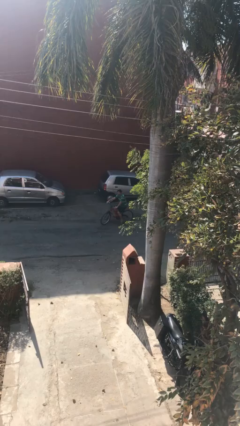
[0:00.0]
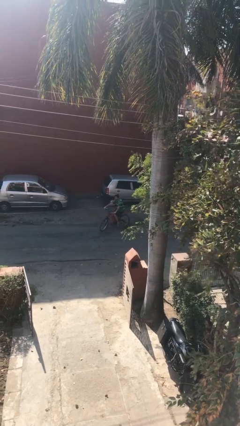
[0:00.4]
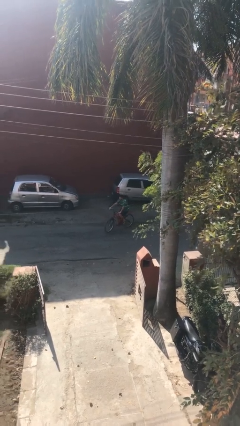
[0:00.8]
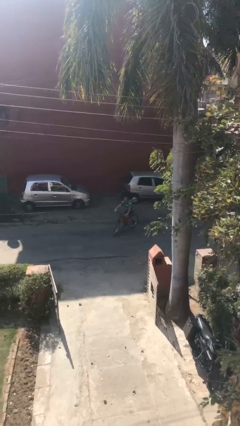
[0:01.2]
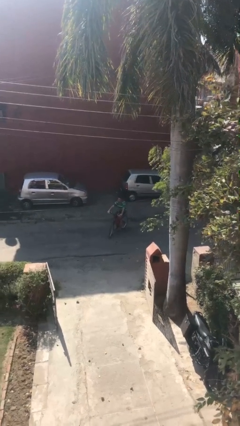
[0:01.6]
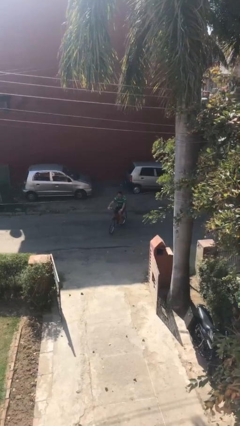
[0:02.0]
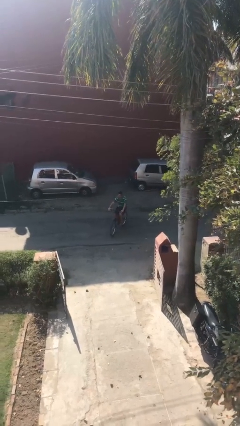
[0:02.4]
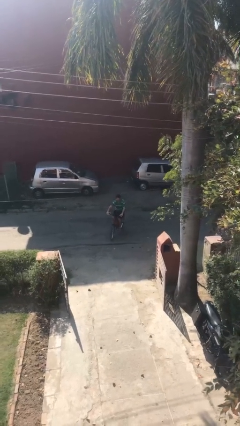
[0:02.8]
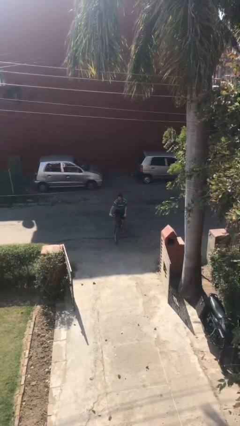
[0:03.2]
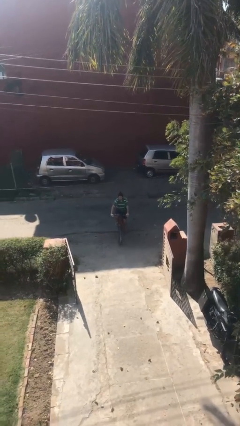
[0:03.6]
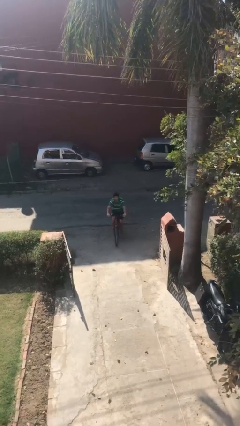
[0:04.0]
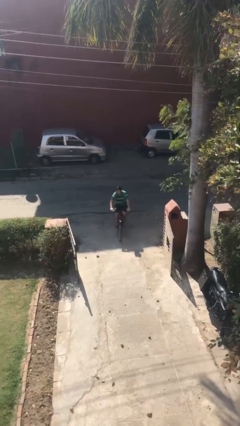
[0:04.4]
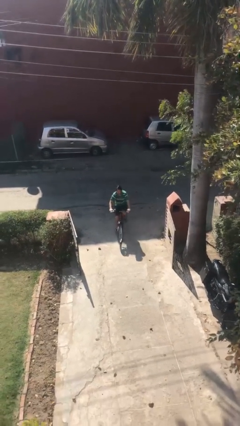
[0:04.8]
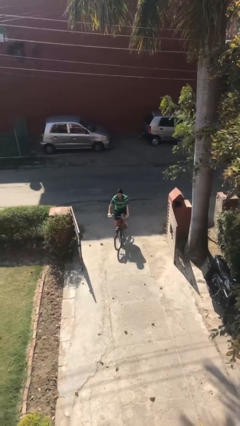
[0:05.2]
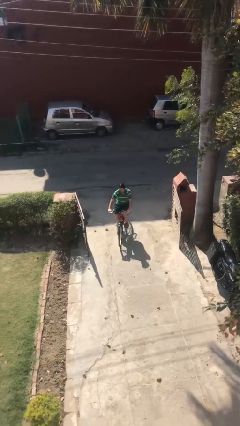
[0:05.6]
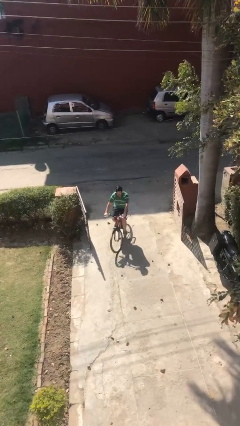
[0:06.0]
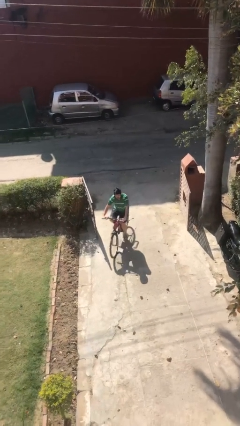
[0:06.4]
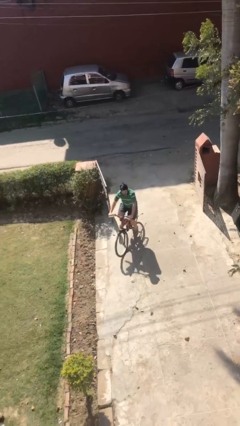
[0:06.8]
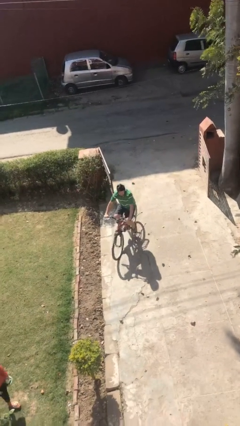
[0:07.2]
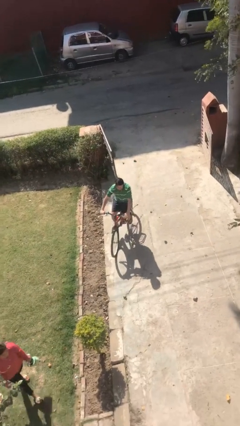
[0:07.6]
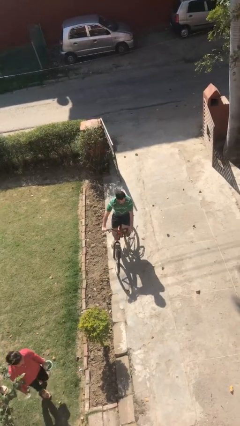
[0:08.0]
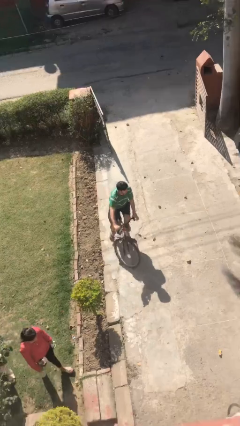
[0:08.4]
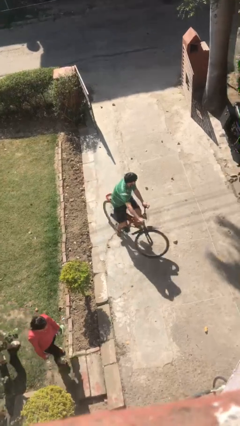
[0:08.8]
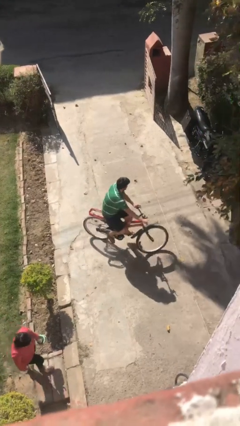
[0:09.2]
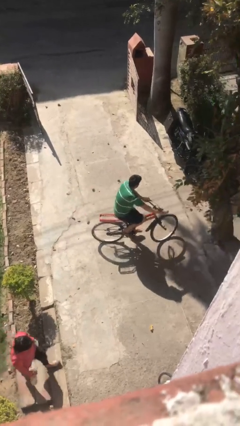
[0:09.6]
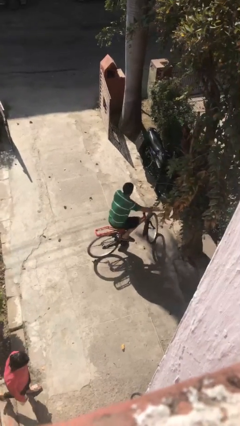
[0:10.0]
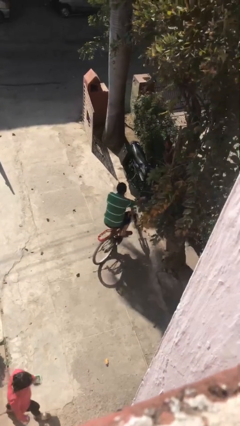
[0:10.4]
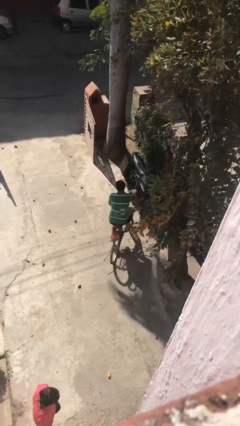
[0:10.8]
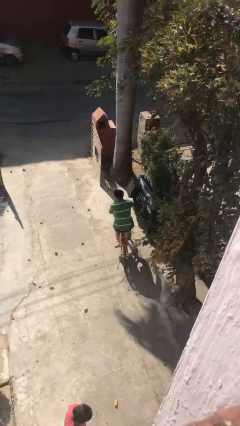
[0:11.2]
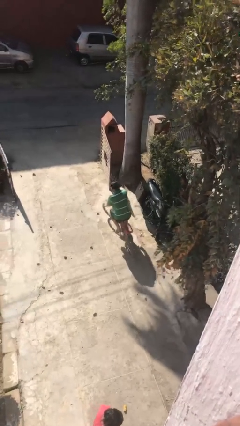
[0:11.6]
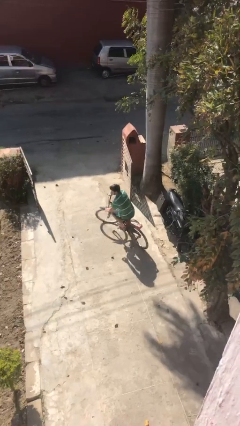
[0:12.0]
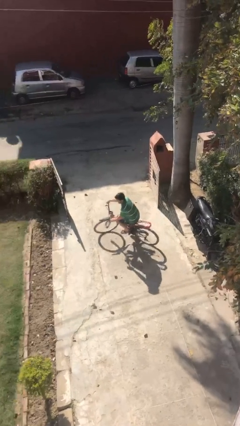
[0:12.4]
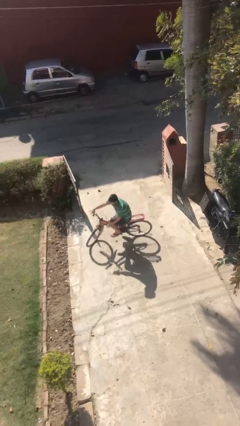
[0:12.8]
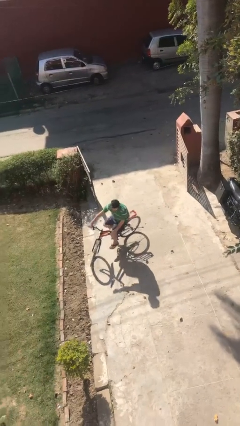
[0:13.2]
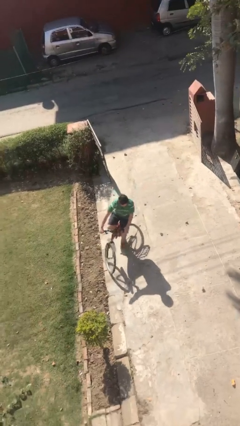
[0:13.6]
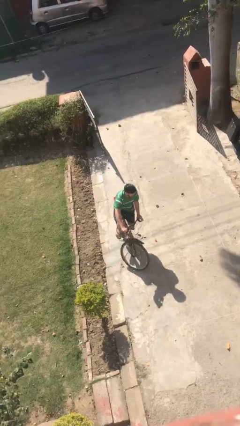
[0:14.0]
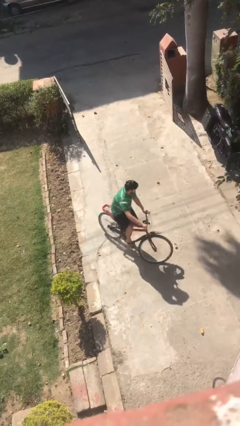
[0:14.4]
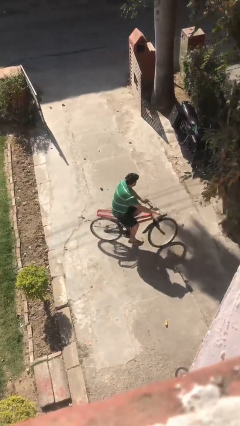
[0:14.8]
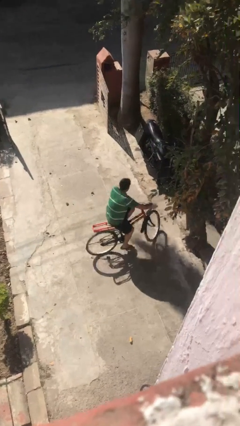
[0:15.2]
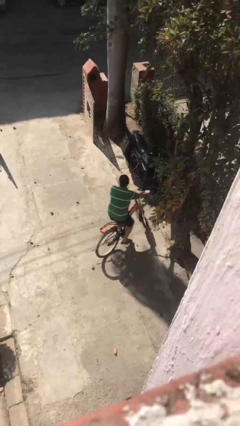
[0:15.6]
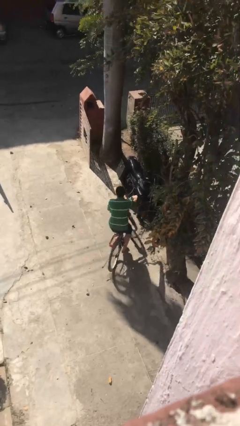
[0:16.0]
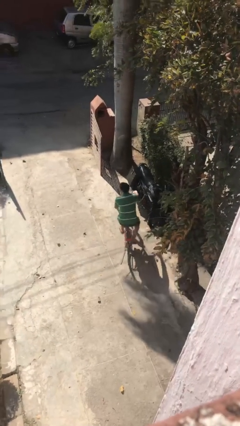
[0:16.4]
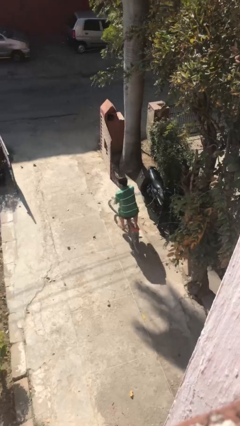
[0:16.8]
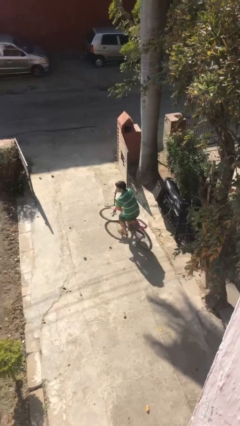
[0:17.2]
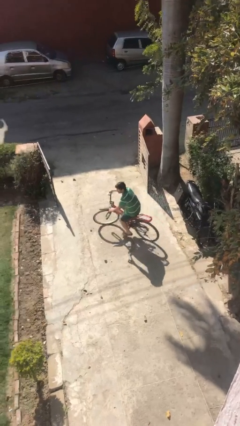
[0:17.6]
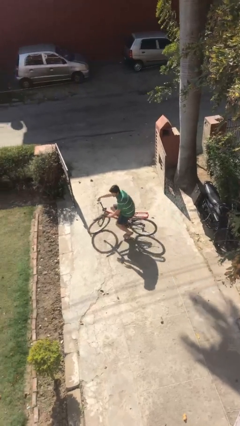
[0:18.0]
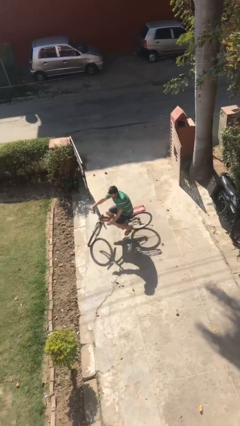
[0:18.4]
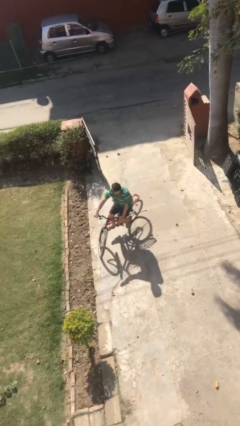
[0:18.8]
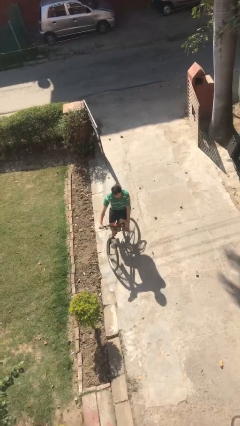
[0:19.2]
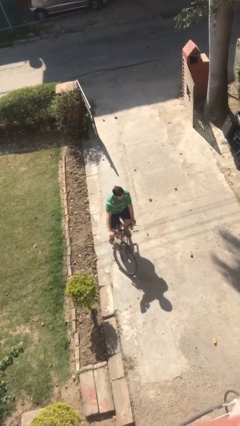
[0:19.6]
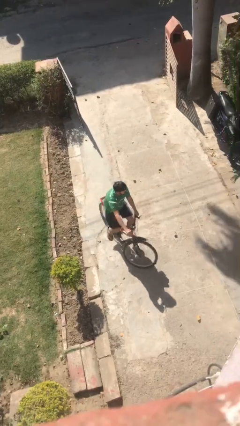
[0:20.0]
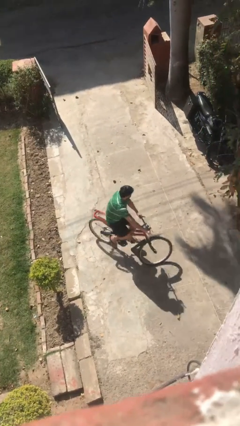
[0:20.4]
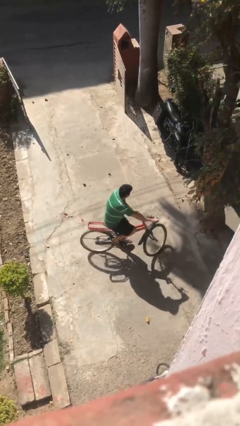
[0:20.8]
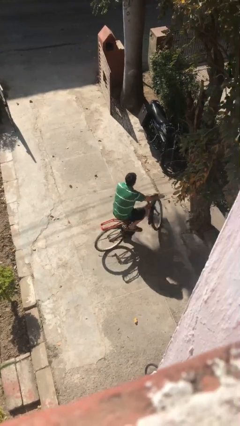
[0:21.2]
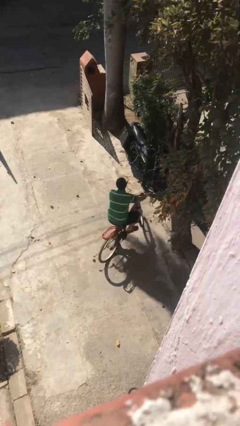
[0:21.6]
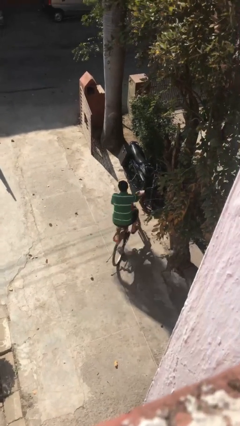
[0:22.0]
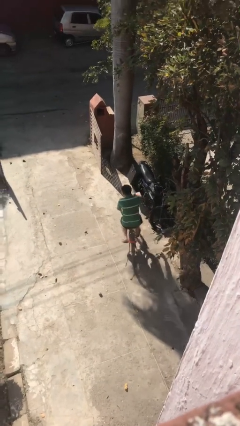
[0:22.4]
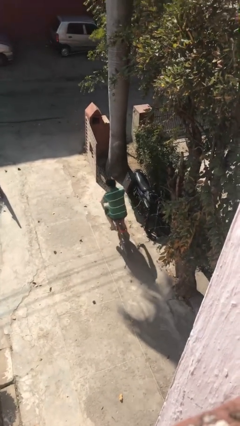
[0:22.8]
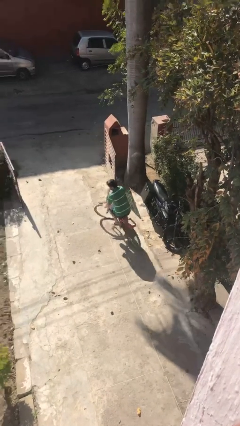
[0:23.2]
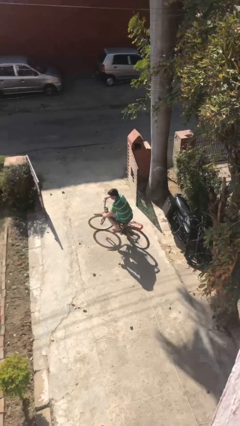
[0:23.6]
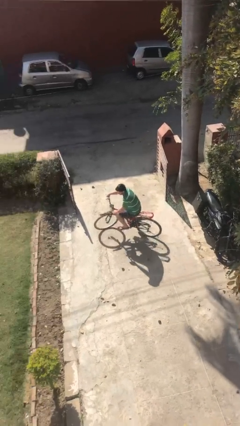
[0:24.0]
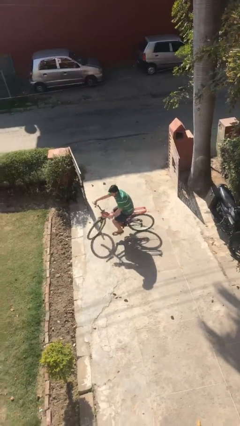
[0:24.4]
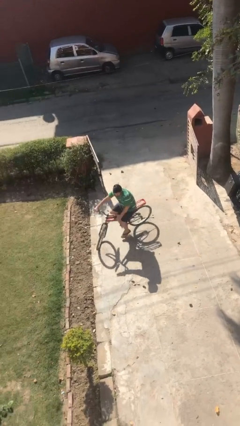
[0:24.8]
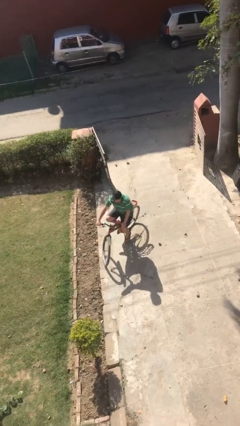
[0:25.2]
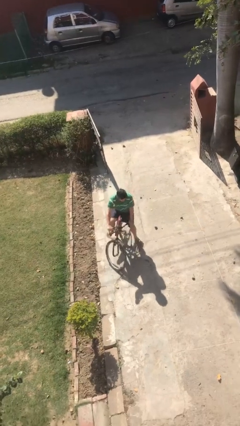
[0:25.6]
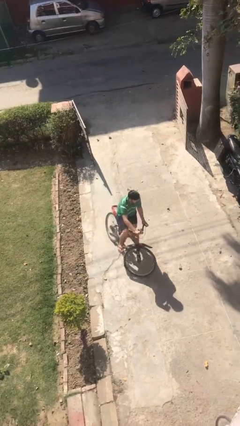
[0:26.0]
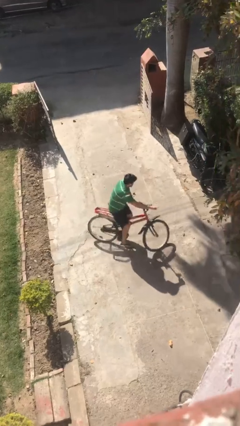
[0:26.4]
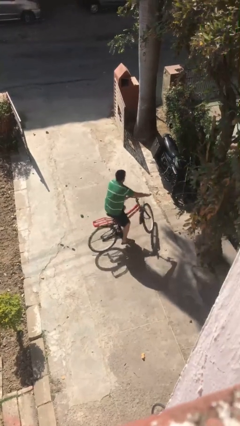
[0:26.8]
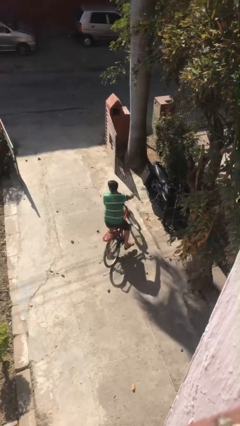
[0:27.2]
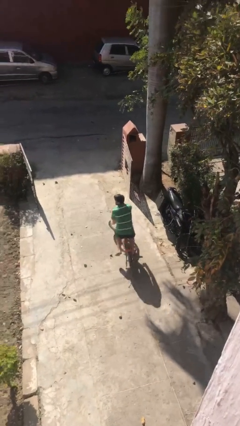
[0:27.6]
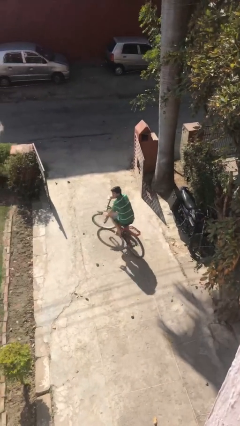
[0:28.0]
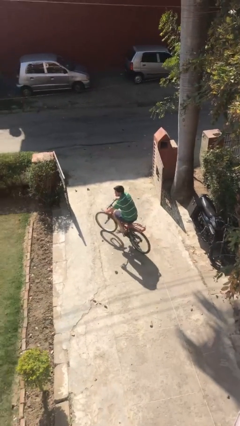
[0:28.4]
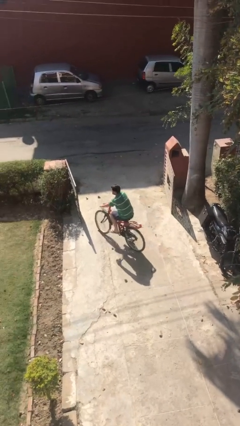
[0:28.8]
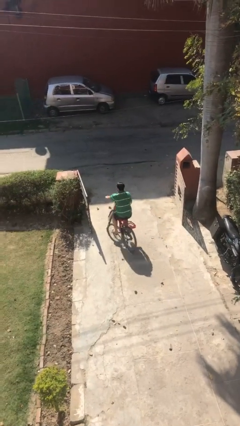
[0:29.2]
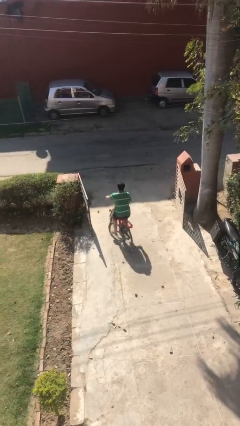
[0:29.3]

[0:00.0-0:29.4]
person rides bicycle

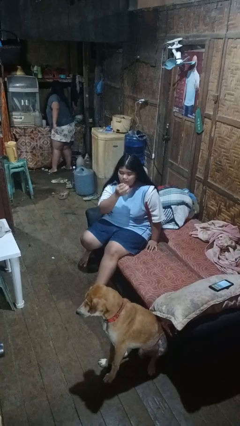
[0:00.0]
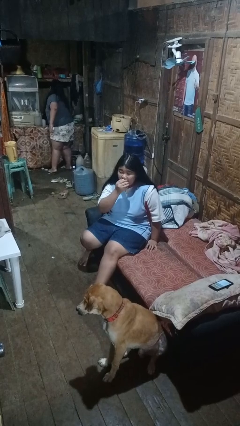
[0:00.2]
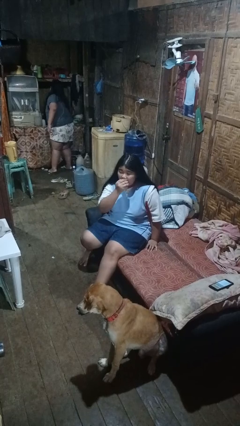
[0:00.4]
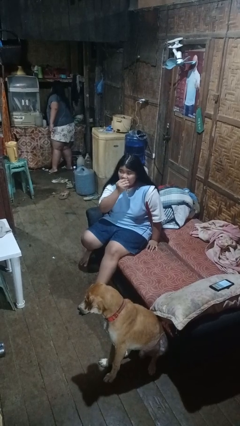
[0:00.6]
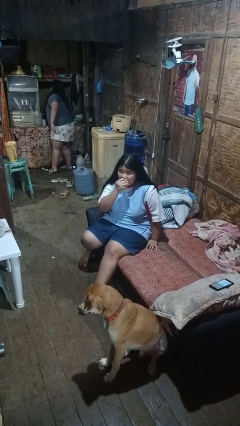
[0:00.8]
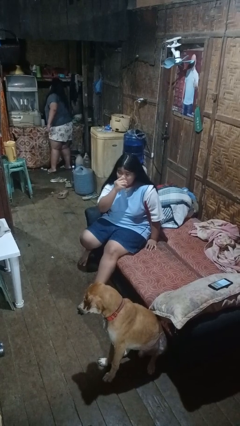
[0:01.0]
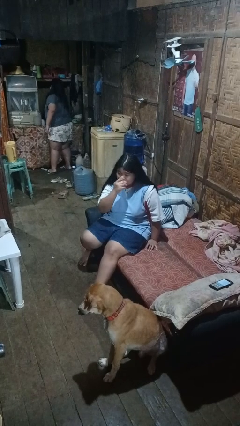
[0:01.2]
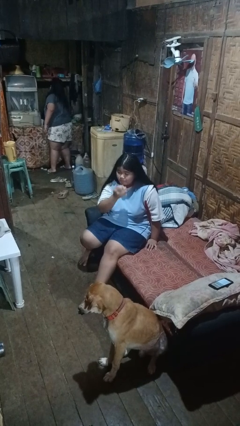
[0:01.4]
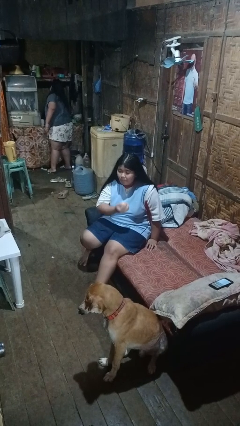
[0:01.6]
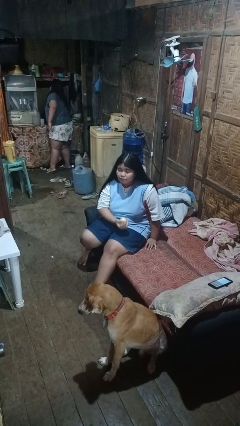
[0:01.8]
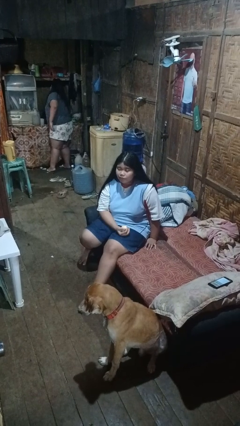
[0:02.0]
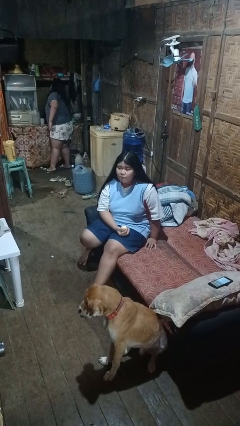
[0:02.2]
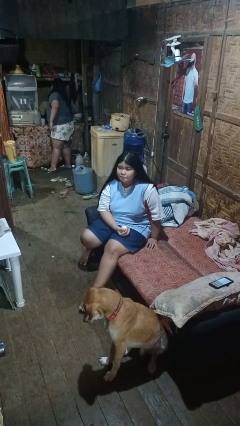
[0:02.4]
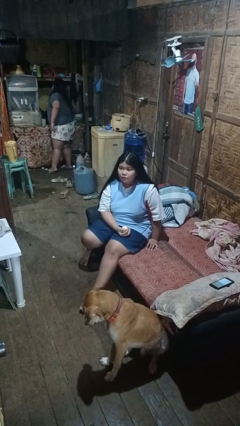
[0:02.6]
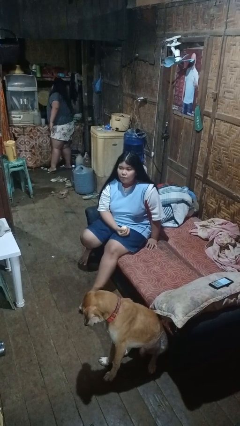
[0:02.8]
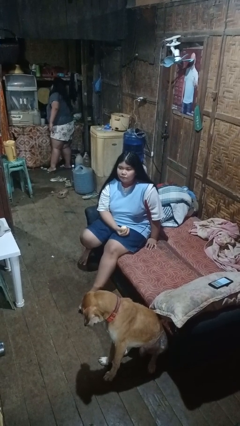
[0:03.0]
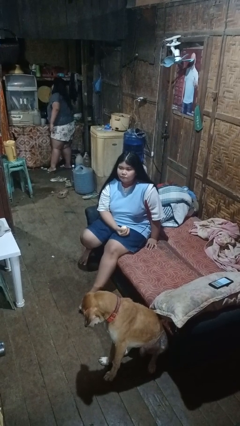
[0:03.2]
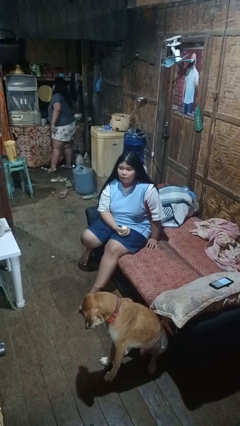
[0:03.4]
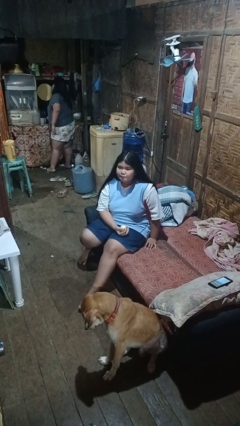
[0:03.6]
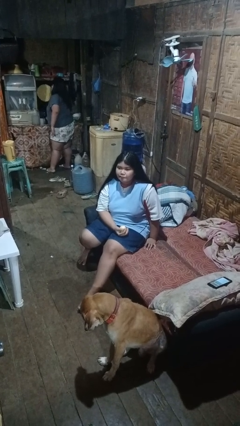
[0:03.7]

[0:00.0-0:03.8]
person eats apple
